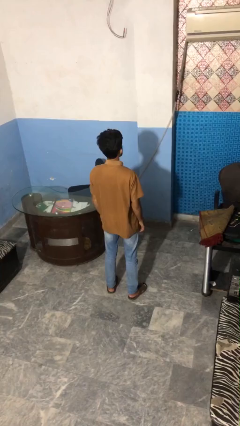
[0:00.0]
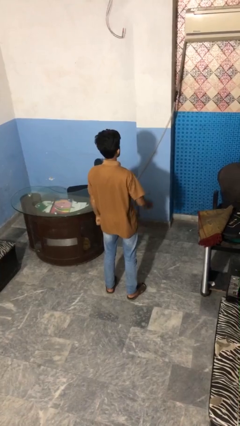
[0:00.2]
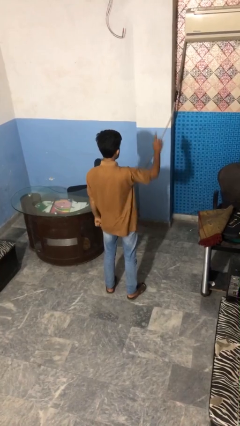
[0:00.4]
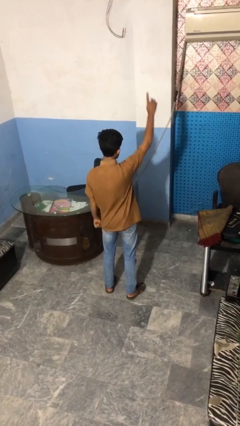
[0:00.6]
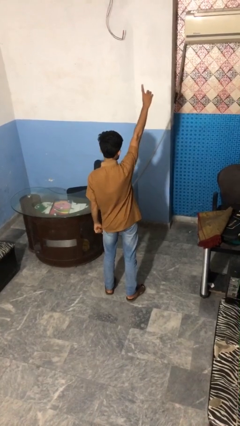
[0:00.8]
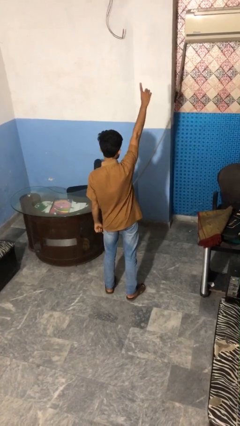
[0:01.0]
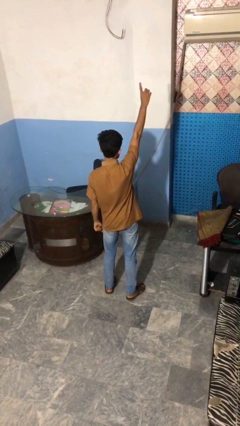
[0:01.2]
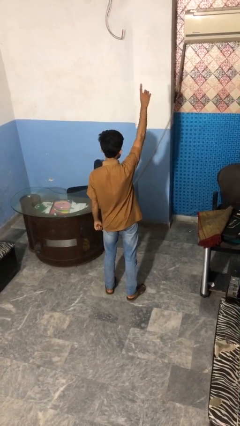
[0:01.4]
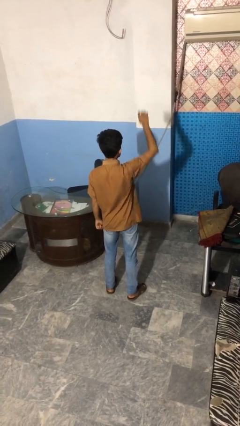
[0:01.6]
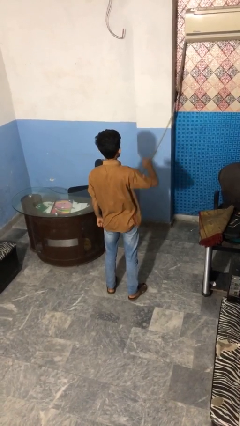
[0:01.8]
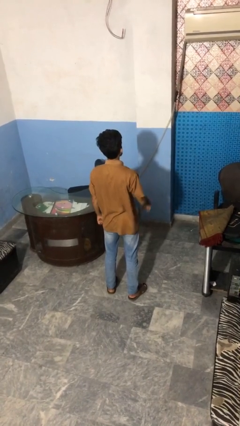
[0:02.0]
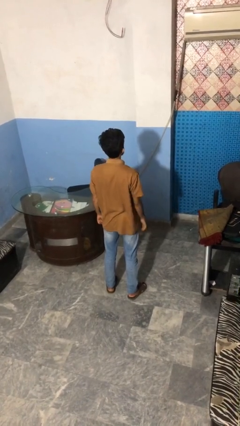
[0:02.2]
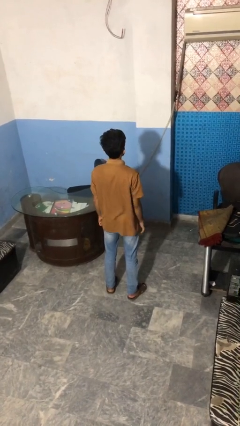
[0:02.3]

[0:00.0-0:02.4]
person gestures number one

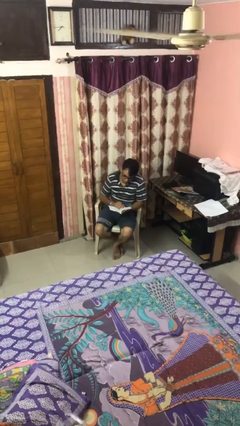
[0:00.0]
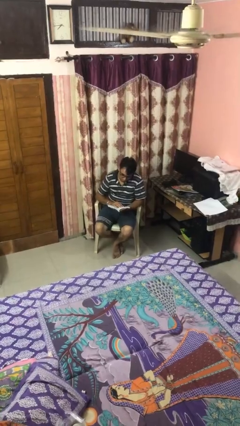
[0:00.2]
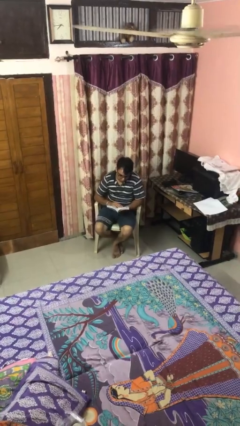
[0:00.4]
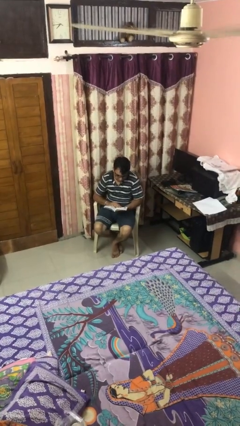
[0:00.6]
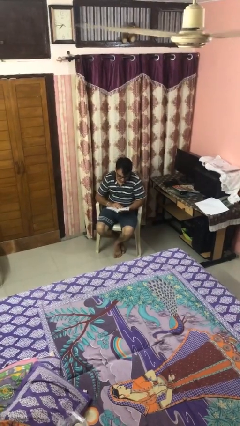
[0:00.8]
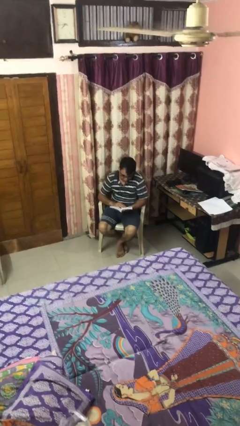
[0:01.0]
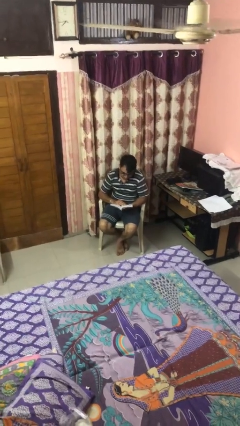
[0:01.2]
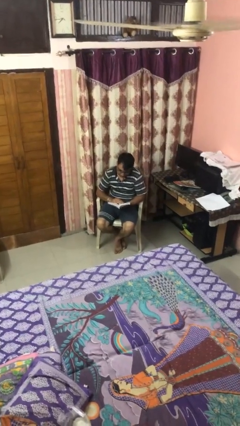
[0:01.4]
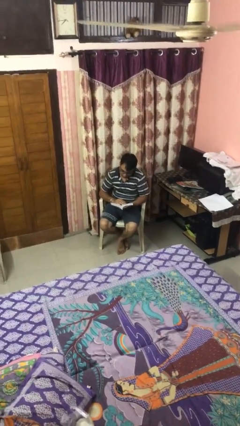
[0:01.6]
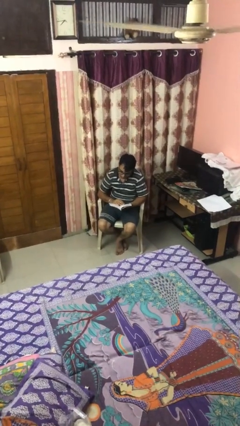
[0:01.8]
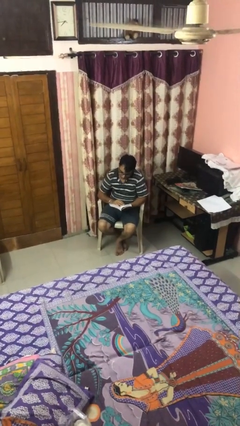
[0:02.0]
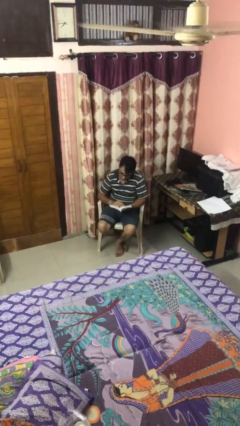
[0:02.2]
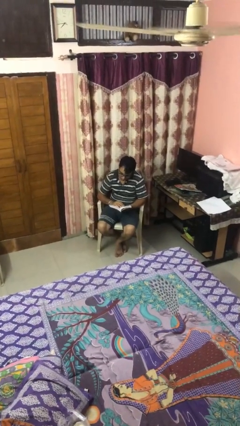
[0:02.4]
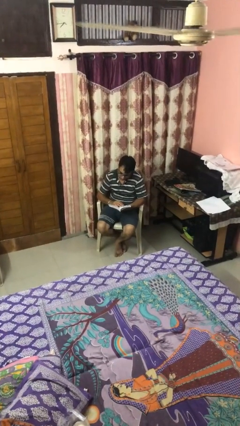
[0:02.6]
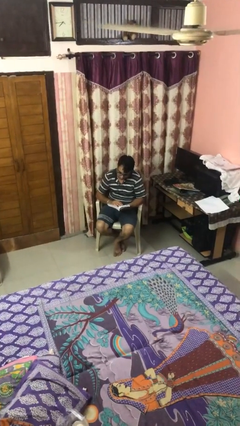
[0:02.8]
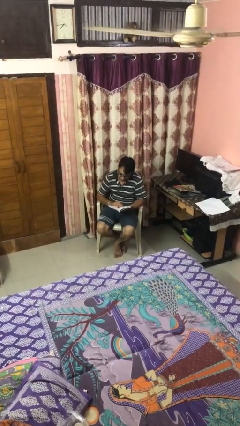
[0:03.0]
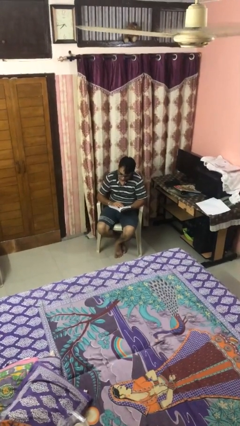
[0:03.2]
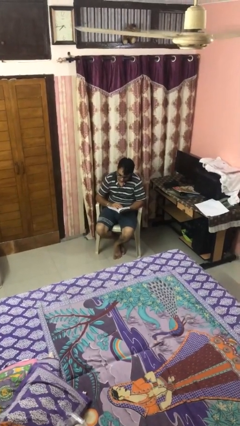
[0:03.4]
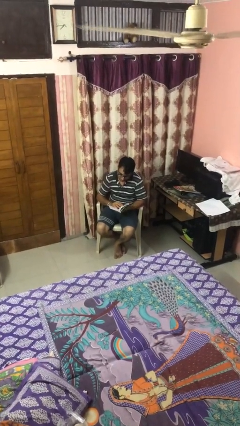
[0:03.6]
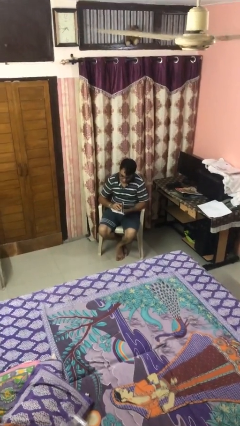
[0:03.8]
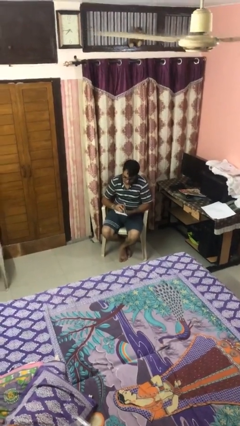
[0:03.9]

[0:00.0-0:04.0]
person reads book

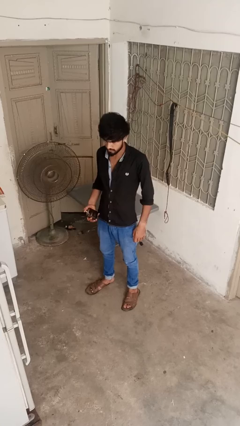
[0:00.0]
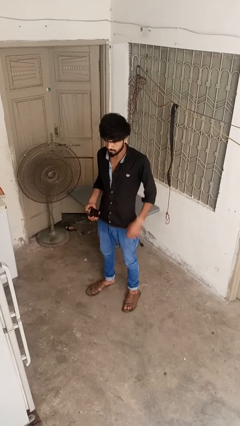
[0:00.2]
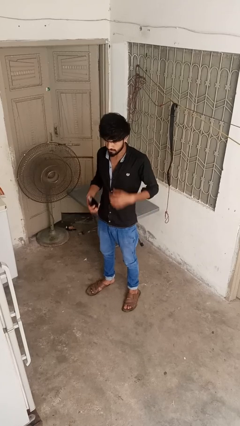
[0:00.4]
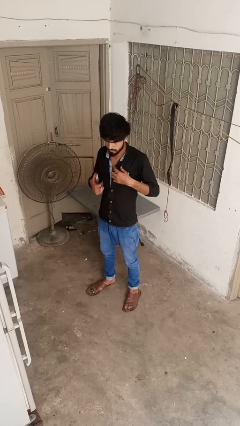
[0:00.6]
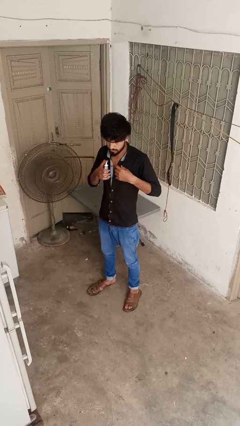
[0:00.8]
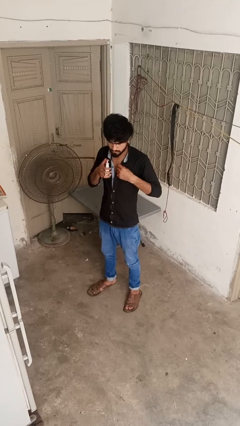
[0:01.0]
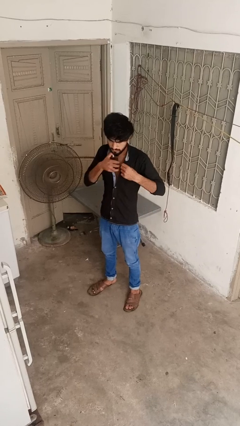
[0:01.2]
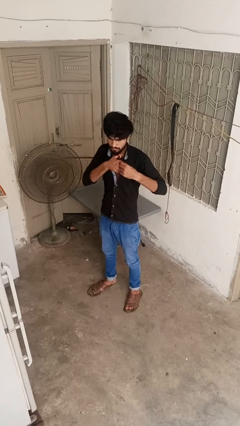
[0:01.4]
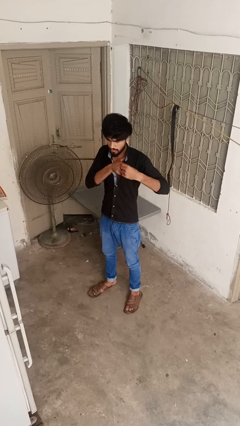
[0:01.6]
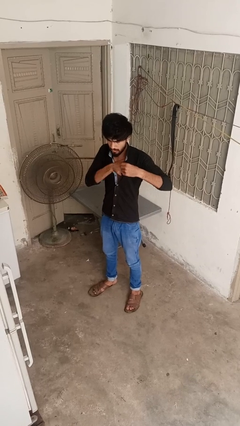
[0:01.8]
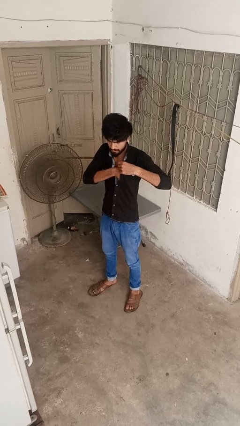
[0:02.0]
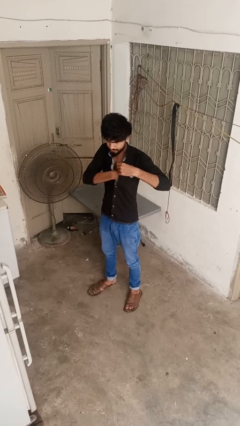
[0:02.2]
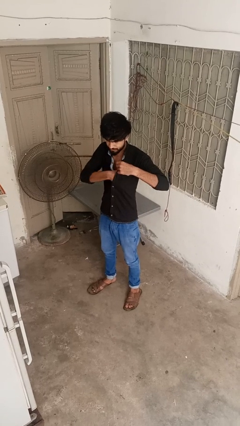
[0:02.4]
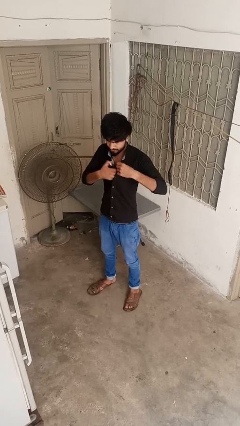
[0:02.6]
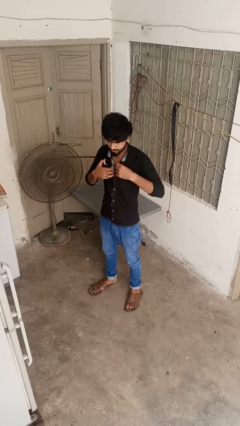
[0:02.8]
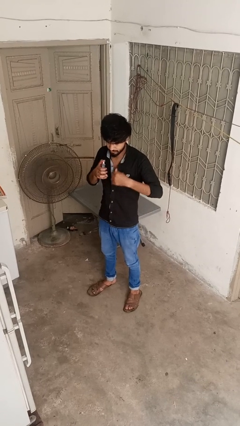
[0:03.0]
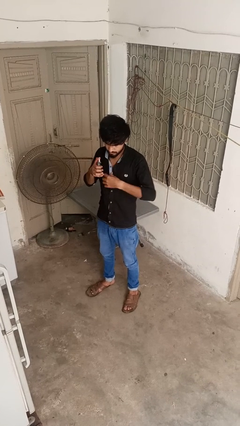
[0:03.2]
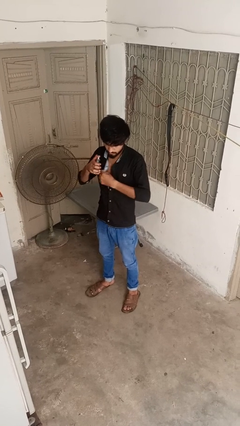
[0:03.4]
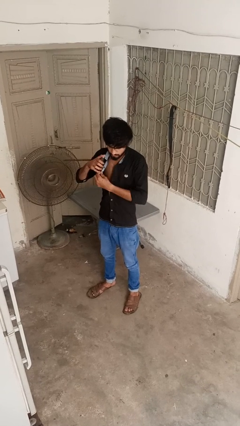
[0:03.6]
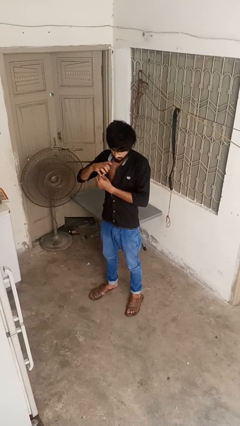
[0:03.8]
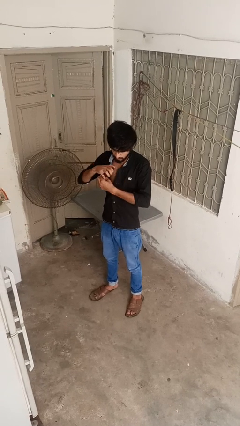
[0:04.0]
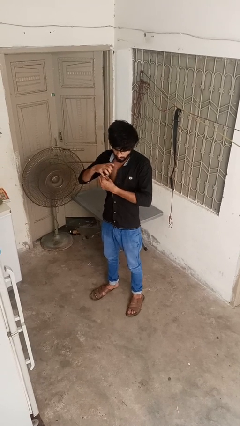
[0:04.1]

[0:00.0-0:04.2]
person applies deodorant

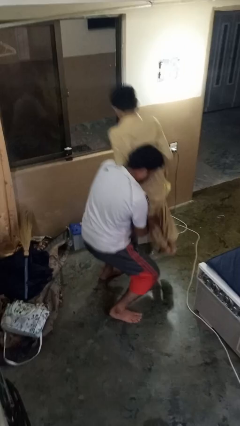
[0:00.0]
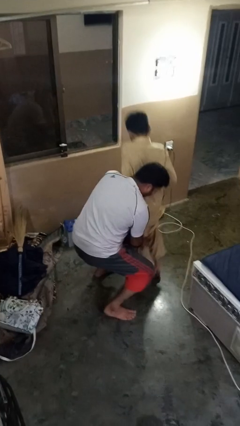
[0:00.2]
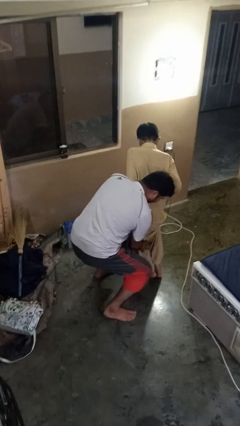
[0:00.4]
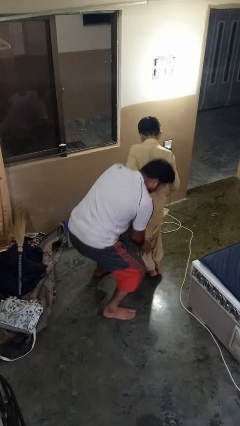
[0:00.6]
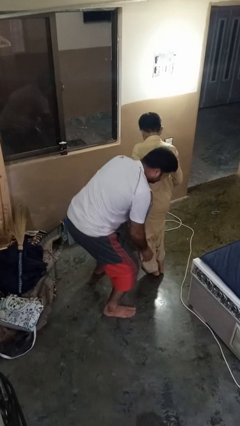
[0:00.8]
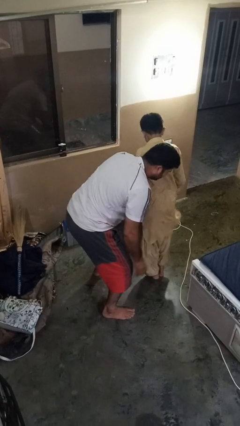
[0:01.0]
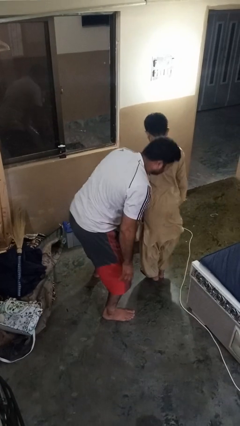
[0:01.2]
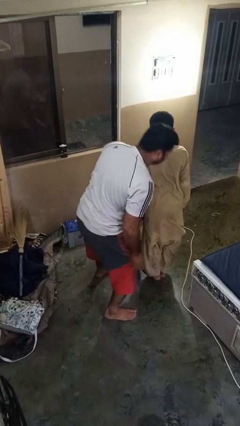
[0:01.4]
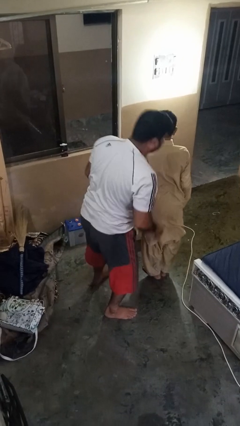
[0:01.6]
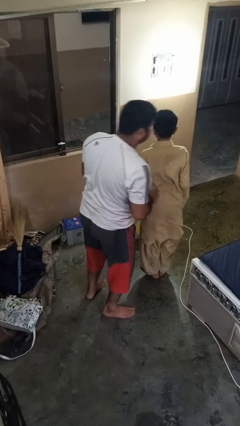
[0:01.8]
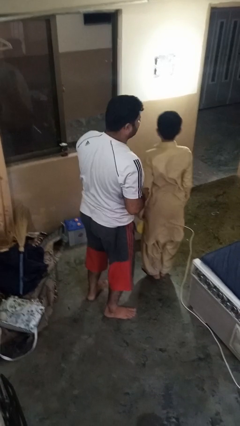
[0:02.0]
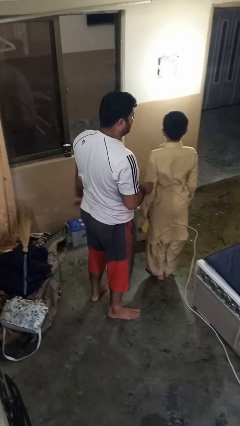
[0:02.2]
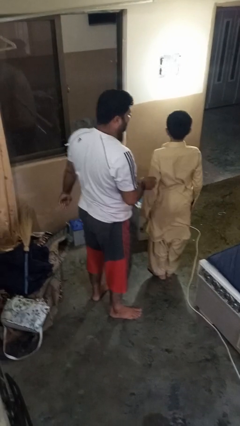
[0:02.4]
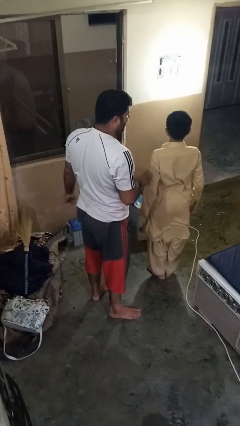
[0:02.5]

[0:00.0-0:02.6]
person puts down person

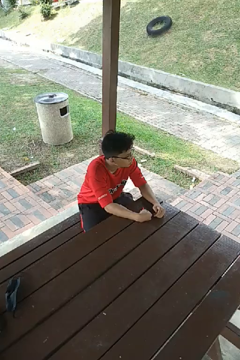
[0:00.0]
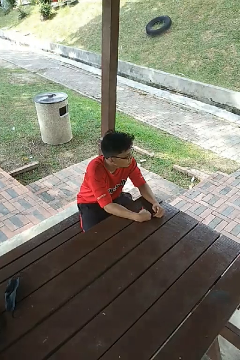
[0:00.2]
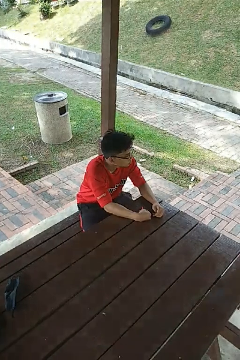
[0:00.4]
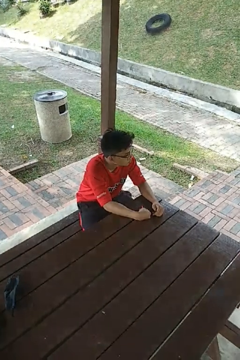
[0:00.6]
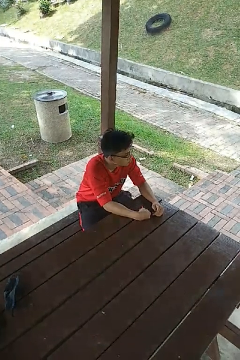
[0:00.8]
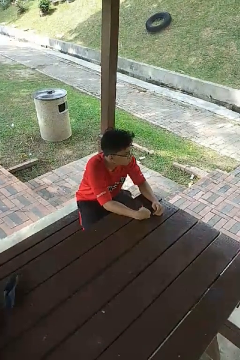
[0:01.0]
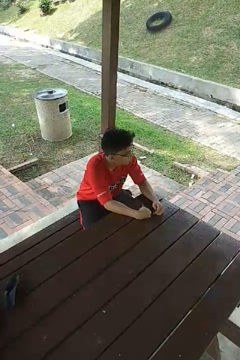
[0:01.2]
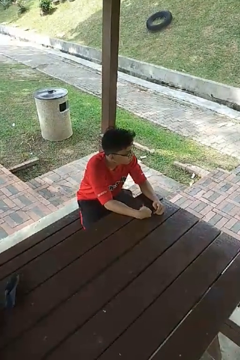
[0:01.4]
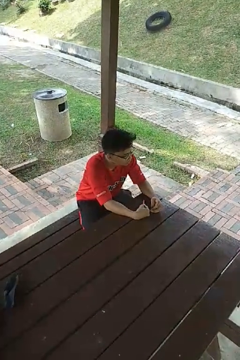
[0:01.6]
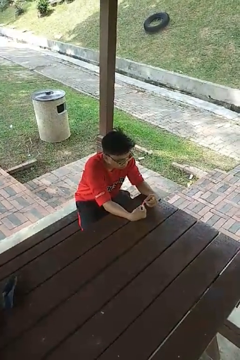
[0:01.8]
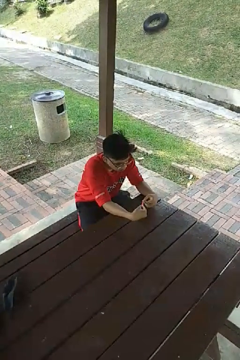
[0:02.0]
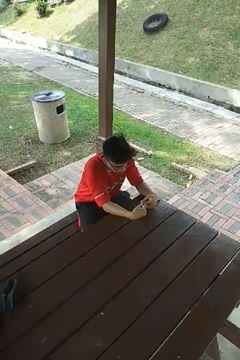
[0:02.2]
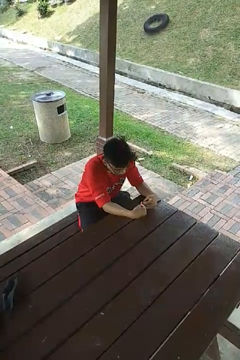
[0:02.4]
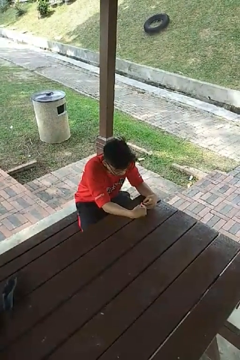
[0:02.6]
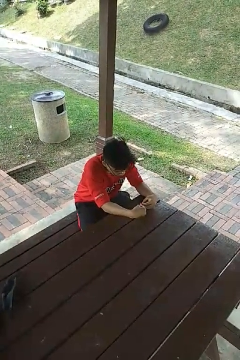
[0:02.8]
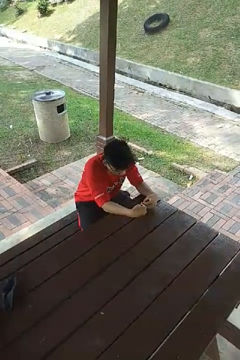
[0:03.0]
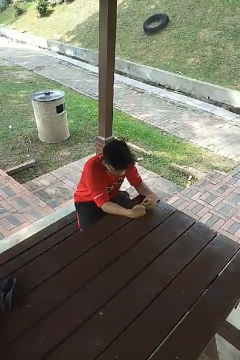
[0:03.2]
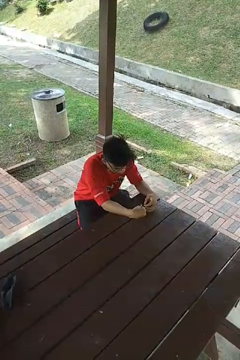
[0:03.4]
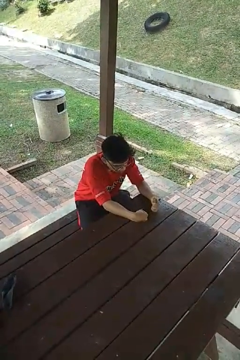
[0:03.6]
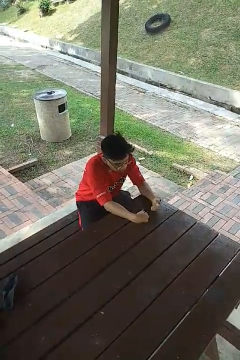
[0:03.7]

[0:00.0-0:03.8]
person paints fingernails

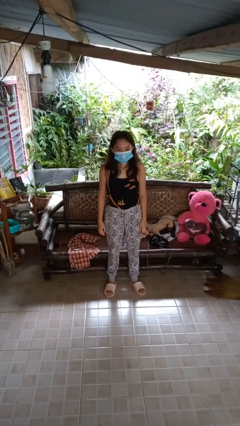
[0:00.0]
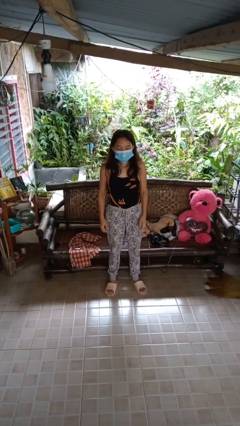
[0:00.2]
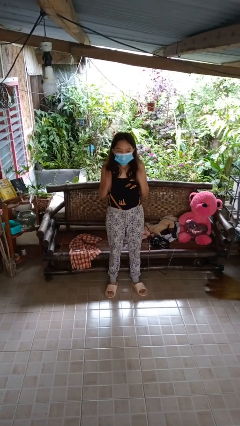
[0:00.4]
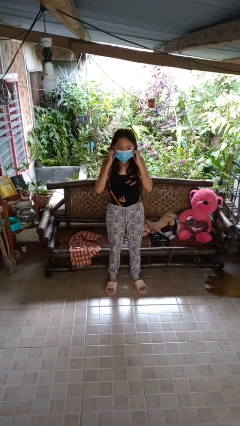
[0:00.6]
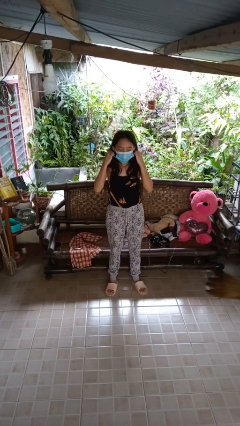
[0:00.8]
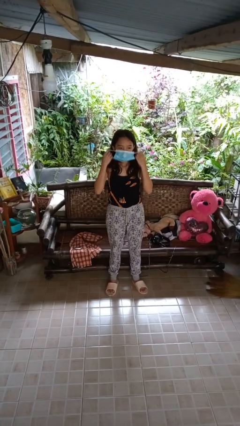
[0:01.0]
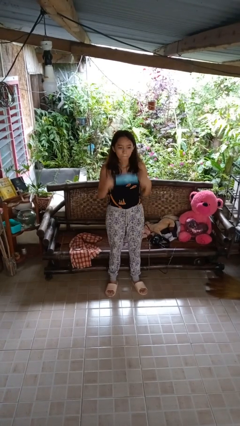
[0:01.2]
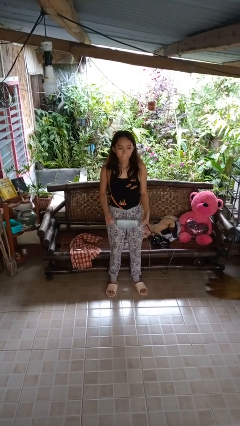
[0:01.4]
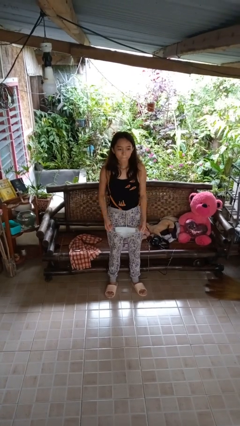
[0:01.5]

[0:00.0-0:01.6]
person takes off facemask
